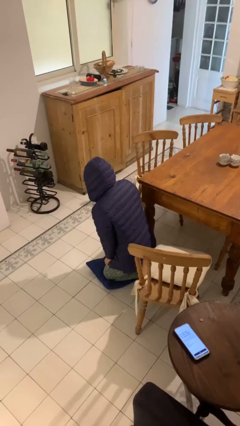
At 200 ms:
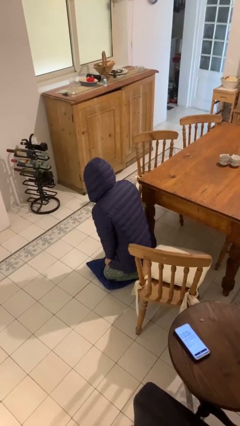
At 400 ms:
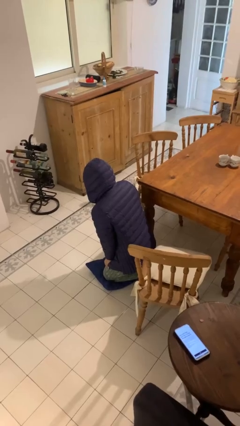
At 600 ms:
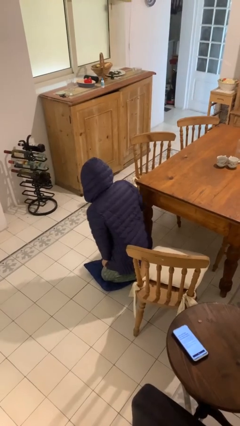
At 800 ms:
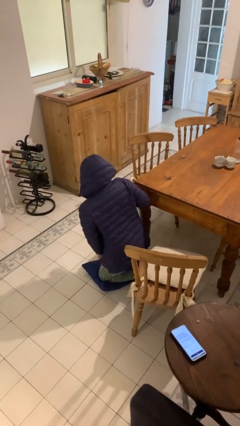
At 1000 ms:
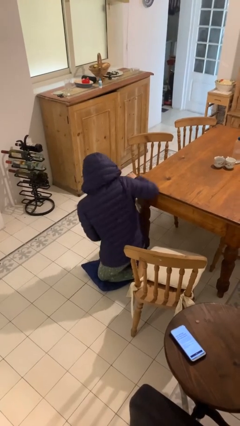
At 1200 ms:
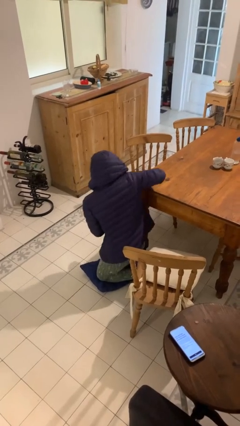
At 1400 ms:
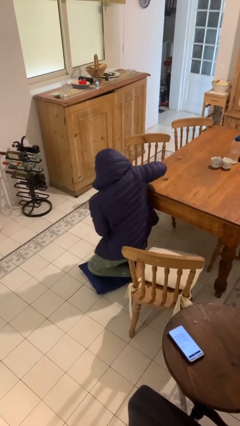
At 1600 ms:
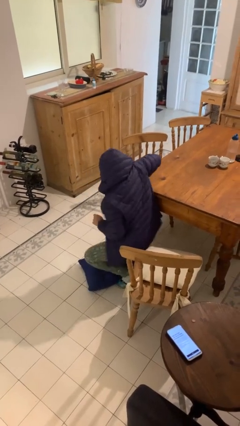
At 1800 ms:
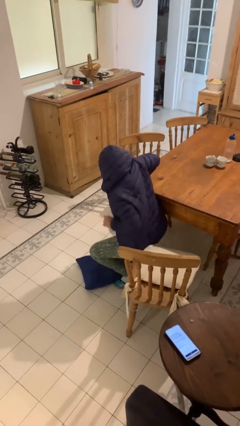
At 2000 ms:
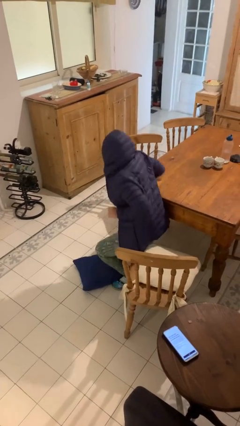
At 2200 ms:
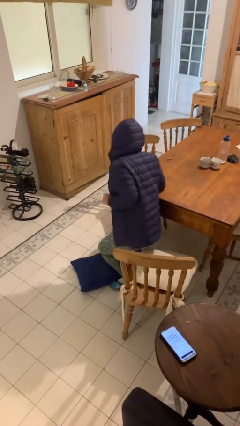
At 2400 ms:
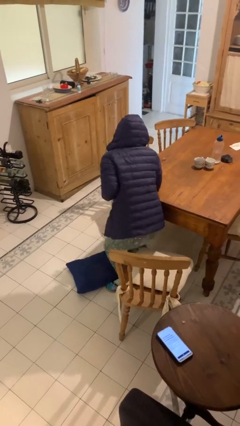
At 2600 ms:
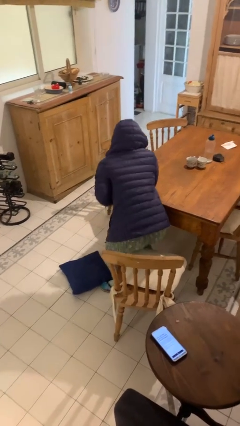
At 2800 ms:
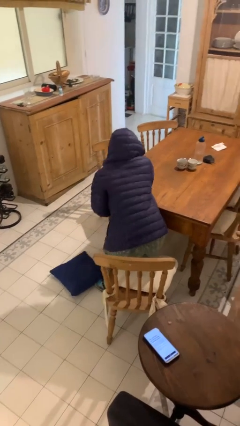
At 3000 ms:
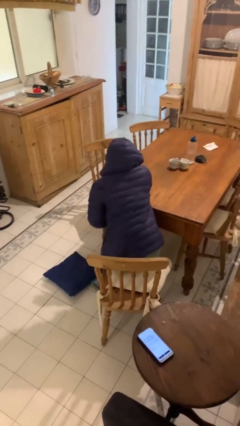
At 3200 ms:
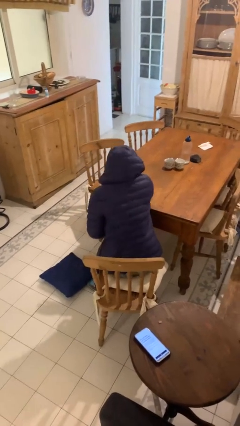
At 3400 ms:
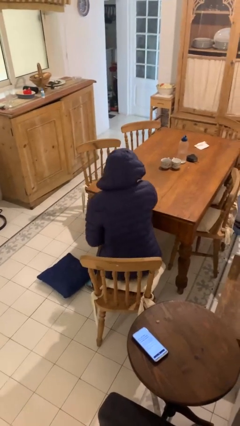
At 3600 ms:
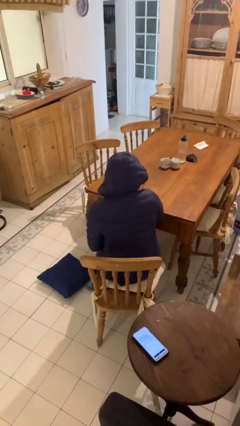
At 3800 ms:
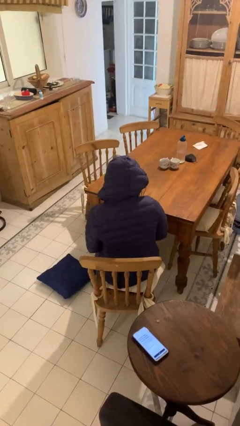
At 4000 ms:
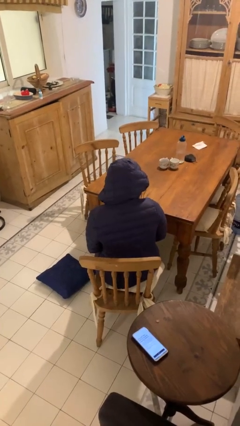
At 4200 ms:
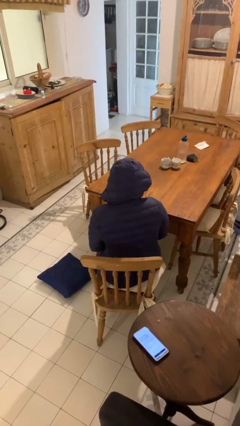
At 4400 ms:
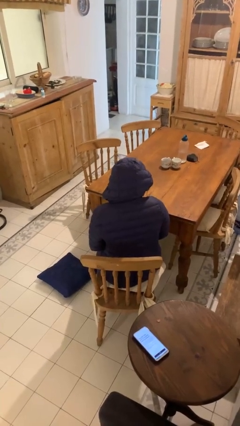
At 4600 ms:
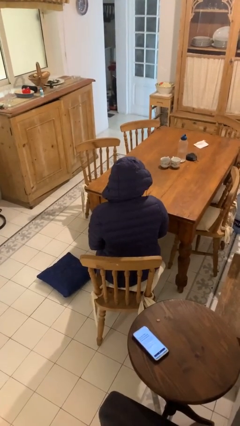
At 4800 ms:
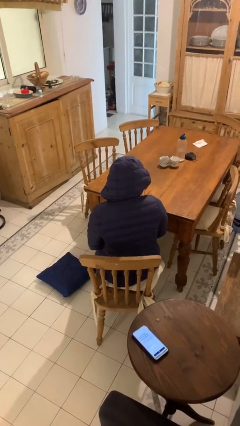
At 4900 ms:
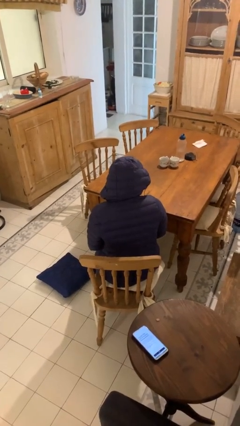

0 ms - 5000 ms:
person sits down

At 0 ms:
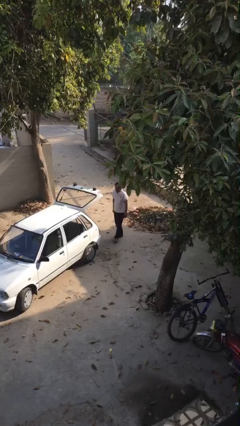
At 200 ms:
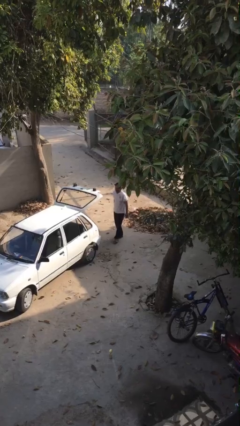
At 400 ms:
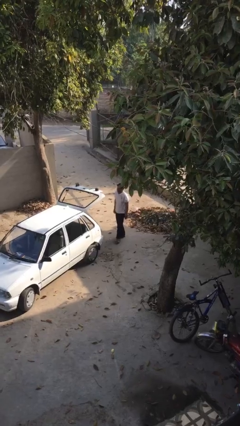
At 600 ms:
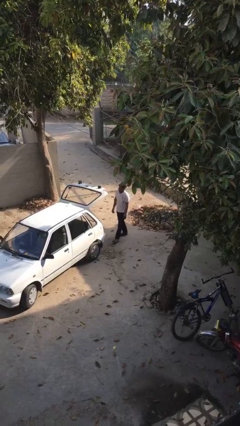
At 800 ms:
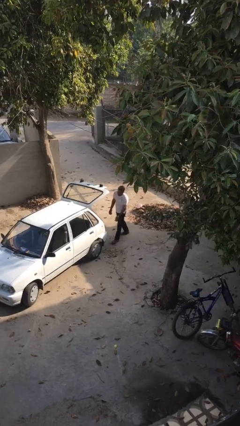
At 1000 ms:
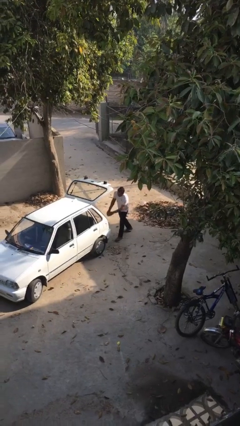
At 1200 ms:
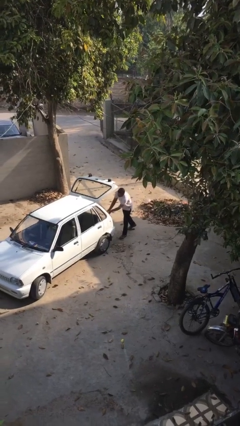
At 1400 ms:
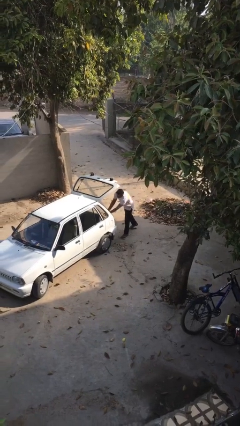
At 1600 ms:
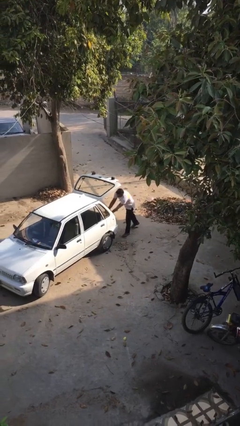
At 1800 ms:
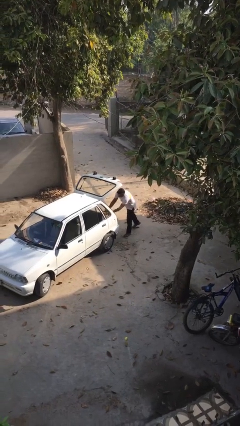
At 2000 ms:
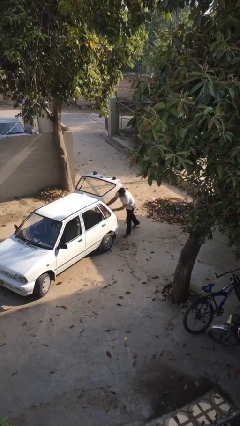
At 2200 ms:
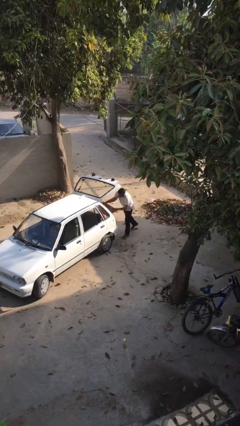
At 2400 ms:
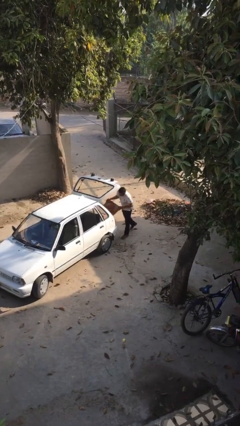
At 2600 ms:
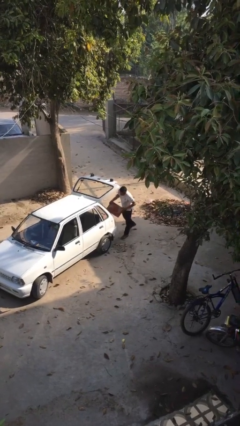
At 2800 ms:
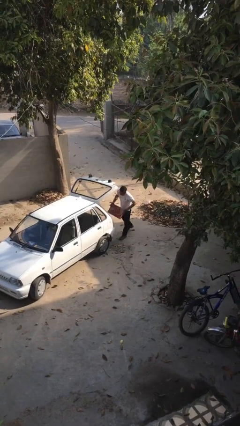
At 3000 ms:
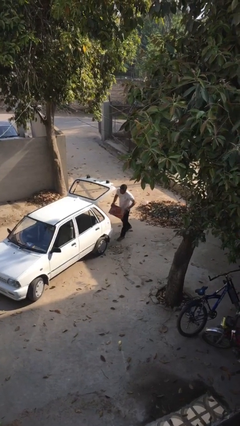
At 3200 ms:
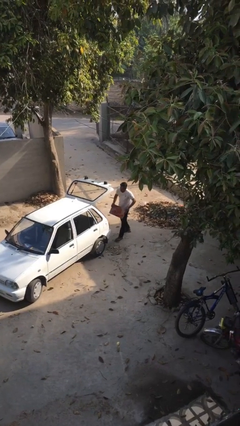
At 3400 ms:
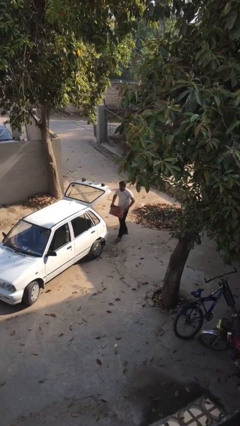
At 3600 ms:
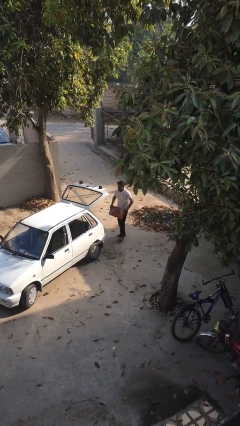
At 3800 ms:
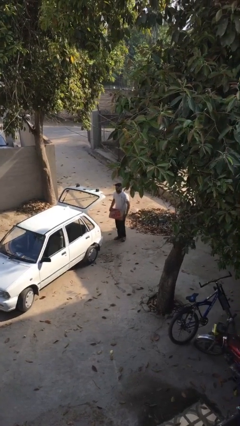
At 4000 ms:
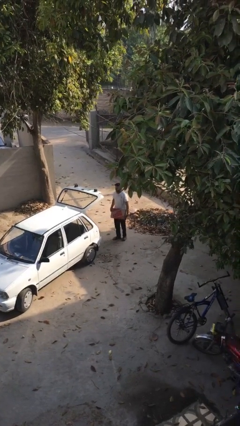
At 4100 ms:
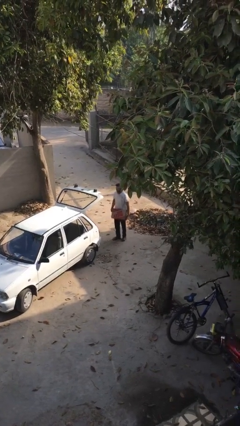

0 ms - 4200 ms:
person unloads car

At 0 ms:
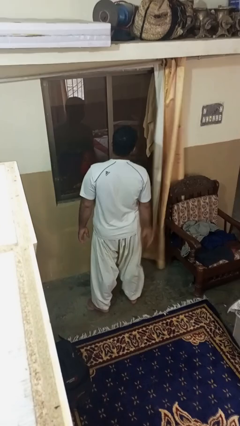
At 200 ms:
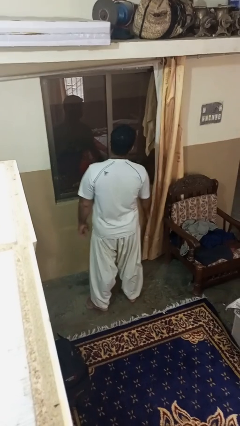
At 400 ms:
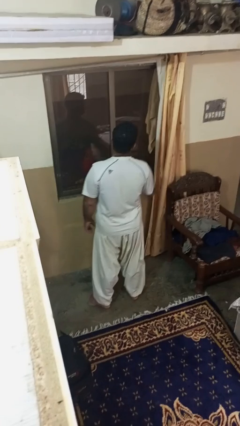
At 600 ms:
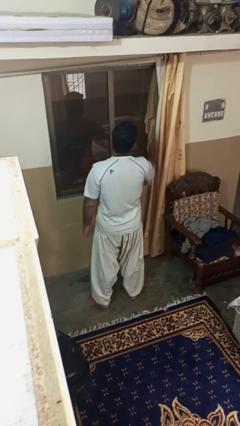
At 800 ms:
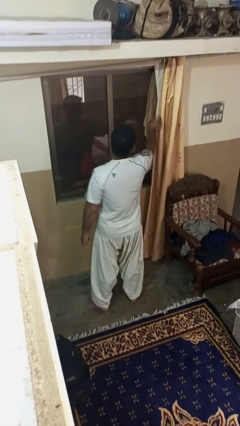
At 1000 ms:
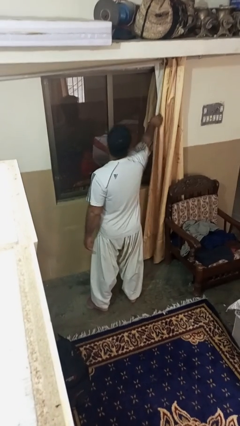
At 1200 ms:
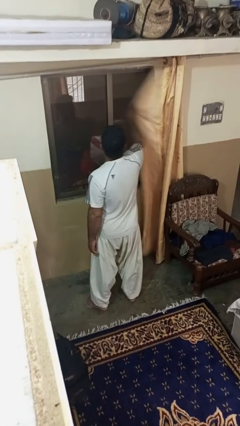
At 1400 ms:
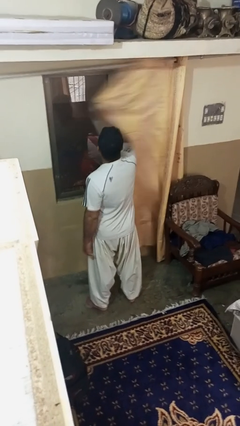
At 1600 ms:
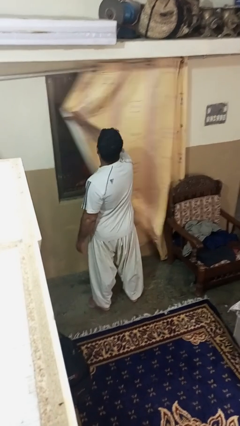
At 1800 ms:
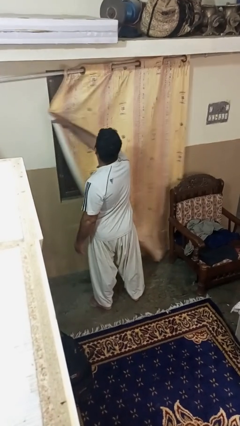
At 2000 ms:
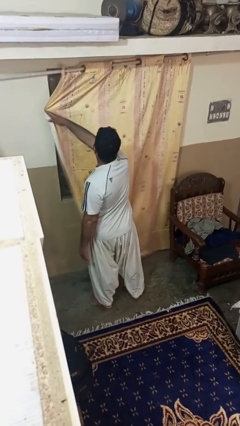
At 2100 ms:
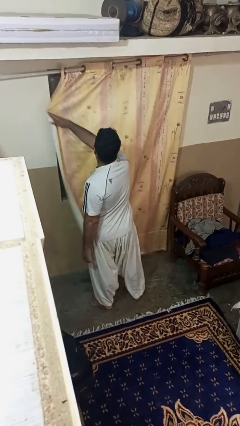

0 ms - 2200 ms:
person closes curtains

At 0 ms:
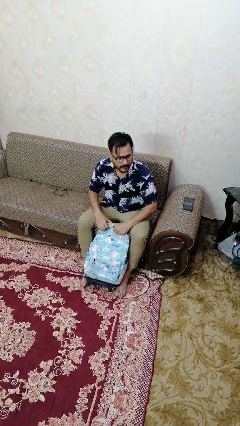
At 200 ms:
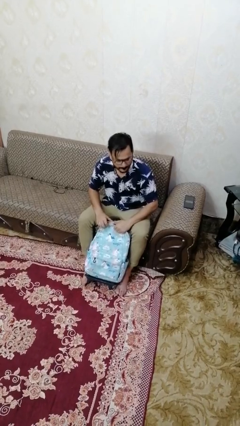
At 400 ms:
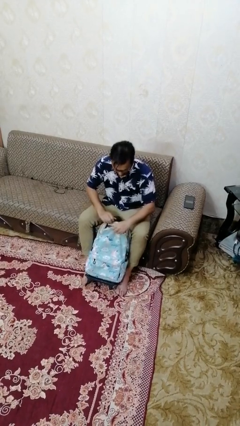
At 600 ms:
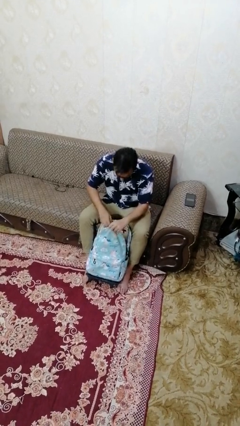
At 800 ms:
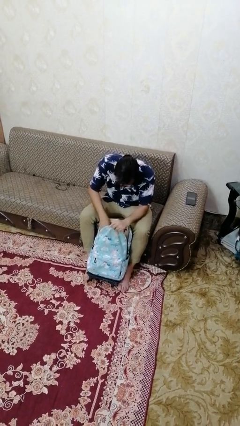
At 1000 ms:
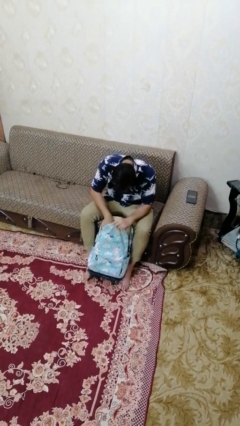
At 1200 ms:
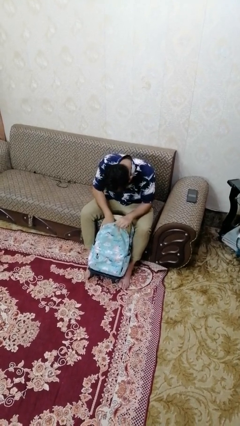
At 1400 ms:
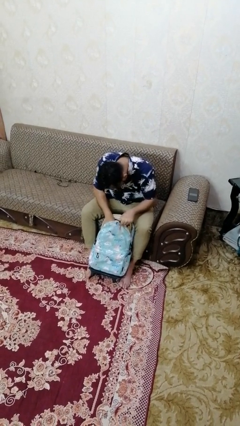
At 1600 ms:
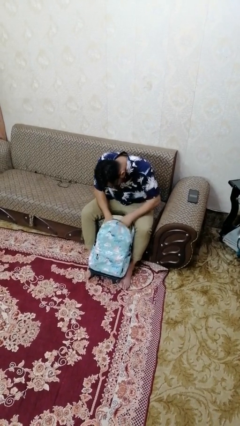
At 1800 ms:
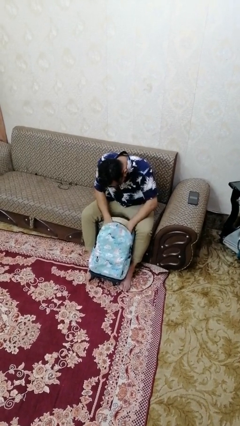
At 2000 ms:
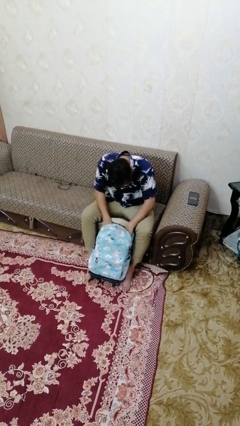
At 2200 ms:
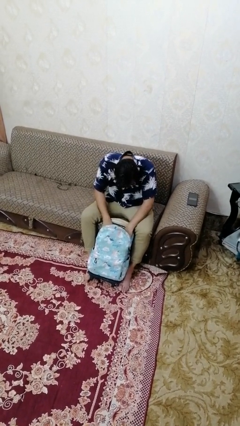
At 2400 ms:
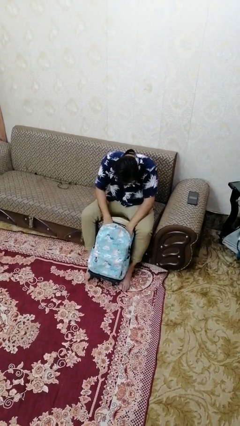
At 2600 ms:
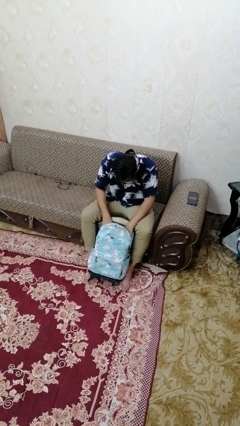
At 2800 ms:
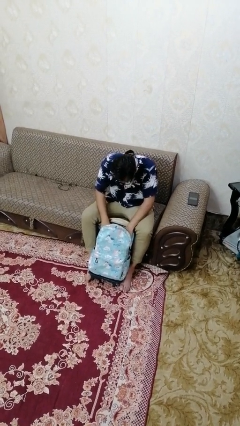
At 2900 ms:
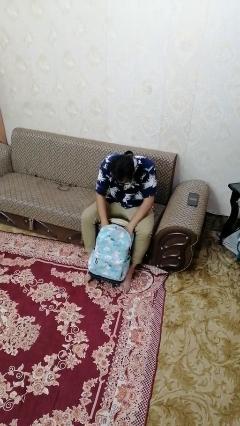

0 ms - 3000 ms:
person searches in backpack

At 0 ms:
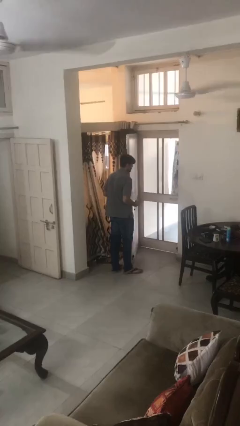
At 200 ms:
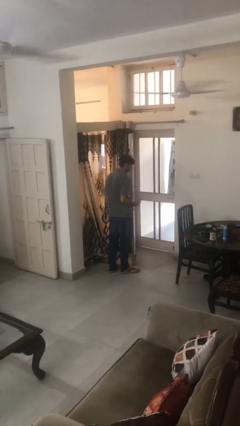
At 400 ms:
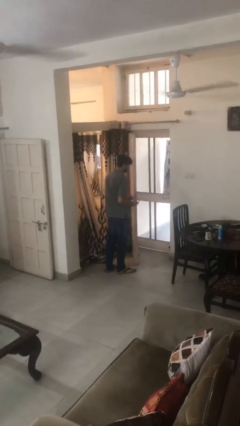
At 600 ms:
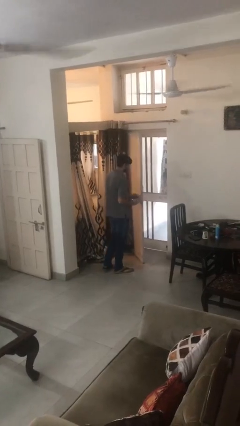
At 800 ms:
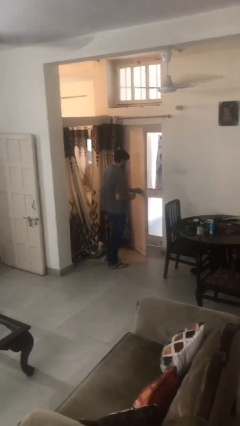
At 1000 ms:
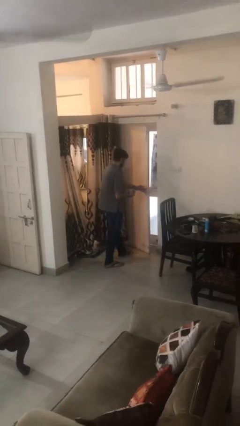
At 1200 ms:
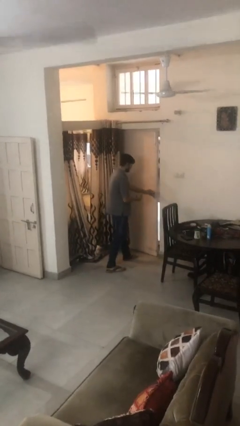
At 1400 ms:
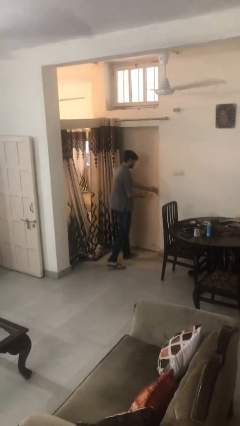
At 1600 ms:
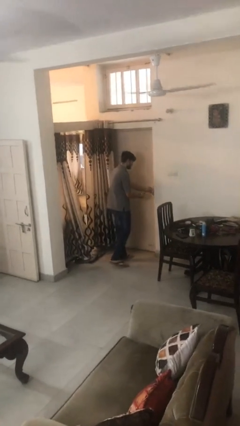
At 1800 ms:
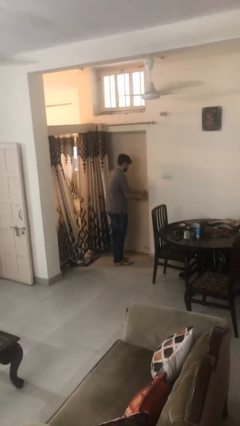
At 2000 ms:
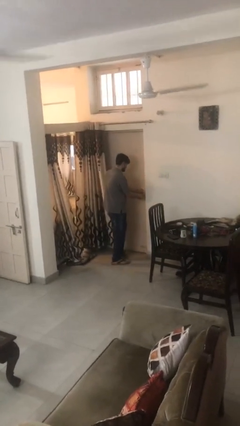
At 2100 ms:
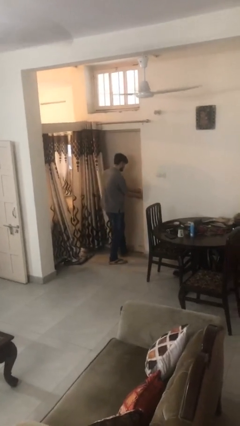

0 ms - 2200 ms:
person closes facility door

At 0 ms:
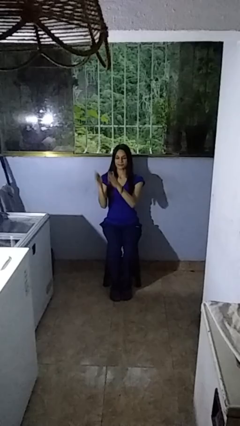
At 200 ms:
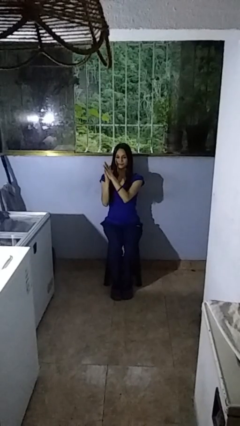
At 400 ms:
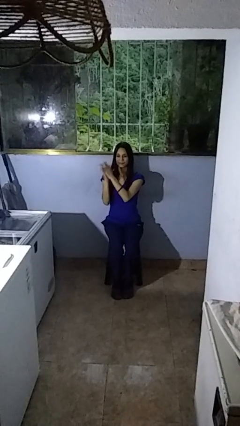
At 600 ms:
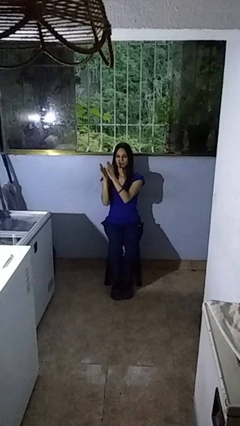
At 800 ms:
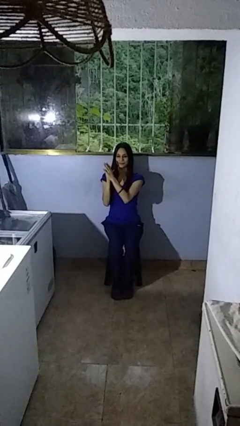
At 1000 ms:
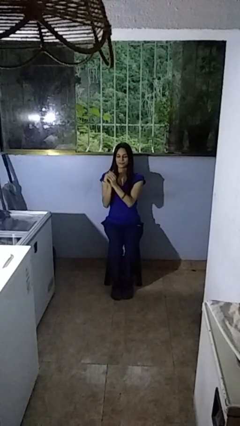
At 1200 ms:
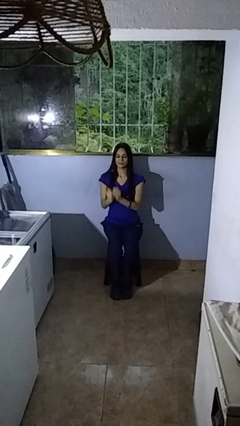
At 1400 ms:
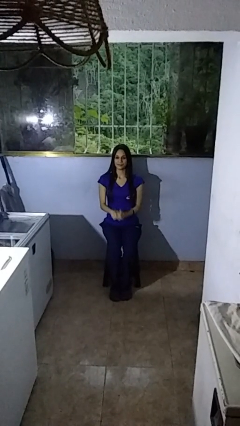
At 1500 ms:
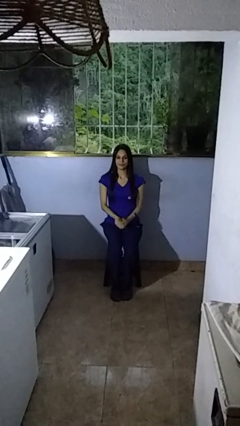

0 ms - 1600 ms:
person claps hands
